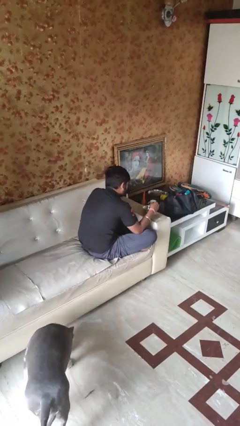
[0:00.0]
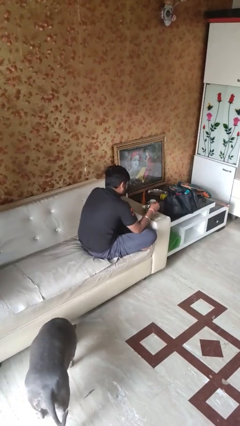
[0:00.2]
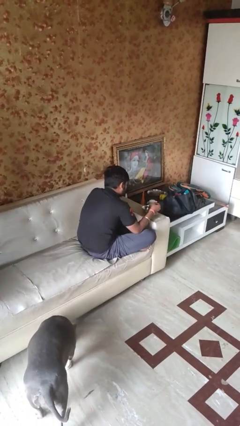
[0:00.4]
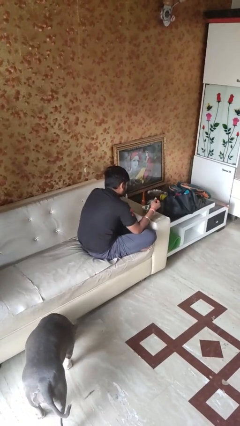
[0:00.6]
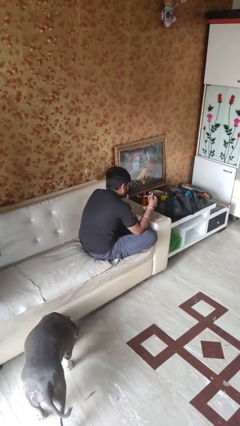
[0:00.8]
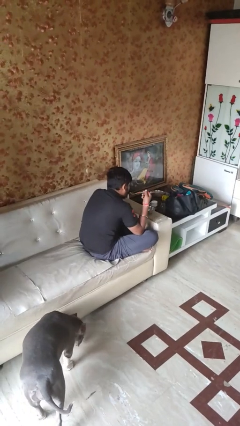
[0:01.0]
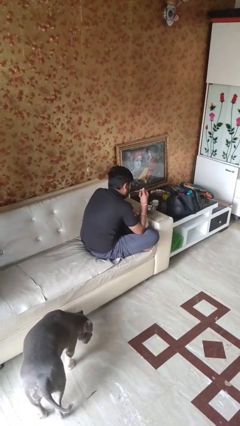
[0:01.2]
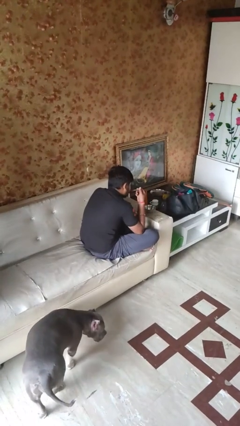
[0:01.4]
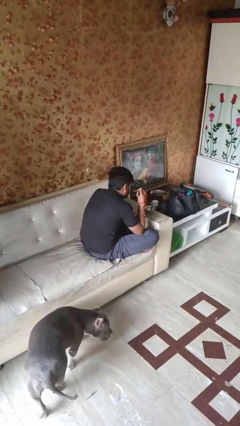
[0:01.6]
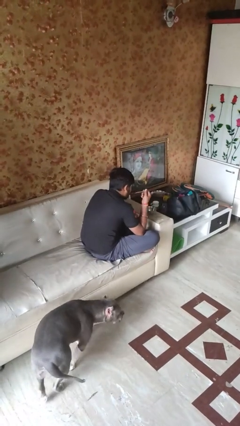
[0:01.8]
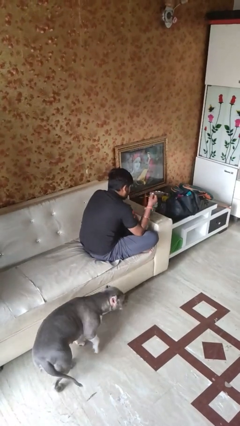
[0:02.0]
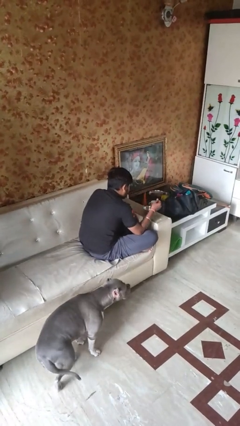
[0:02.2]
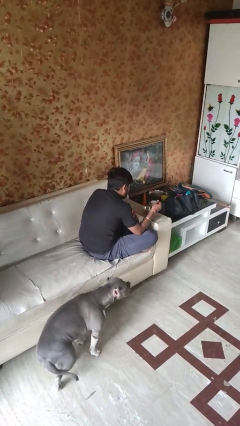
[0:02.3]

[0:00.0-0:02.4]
person eats with utensil

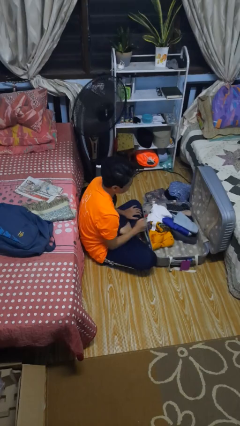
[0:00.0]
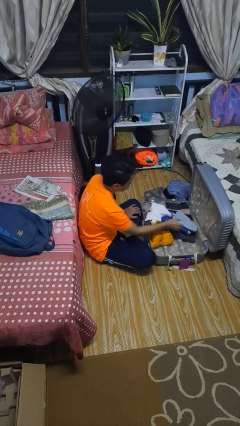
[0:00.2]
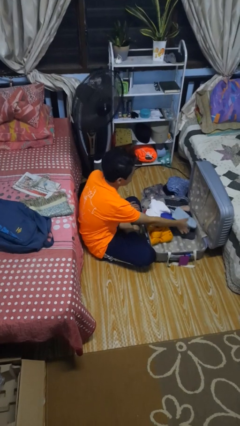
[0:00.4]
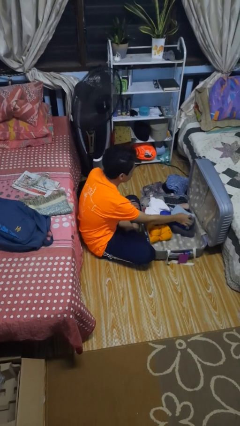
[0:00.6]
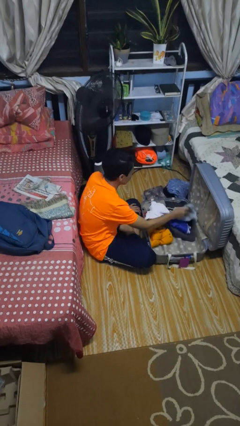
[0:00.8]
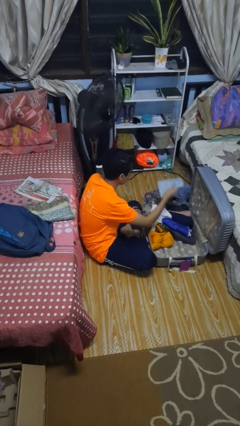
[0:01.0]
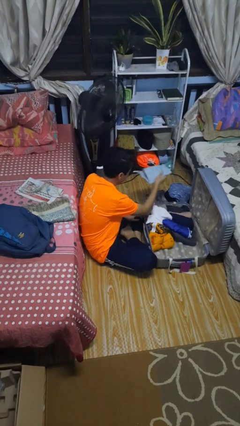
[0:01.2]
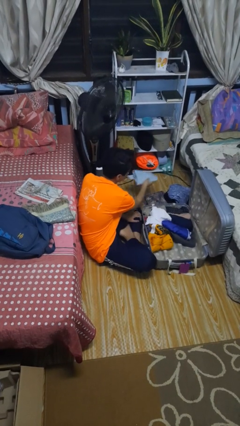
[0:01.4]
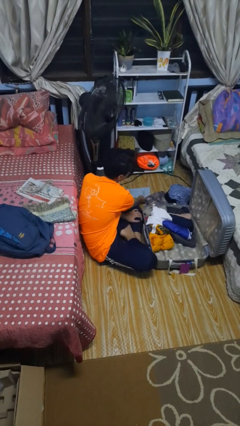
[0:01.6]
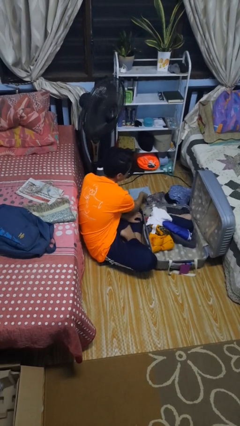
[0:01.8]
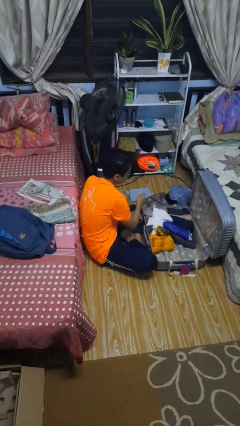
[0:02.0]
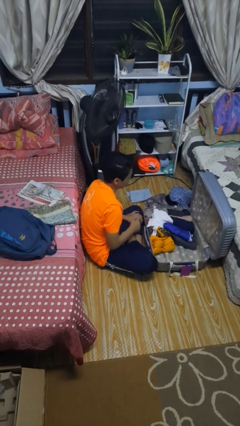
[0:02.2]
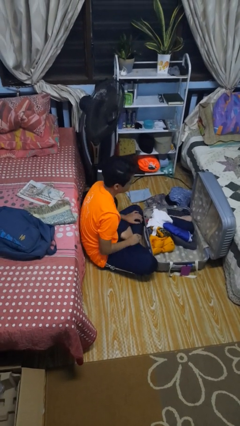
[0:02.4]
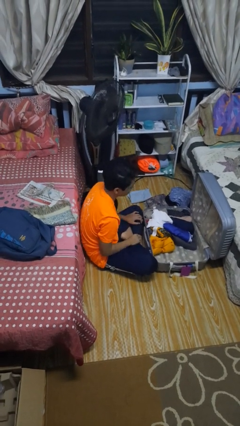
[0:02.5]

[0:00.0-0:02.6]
person unloads clothes from suitcase

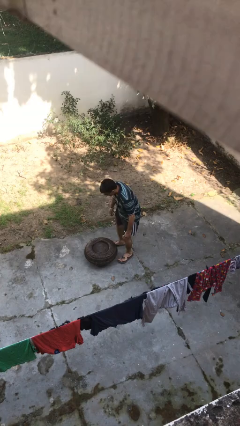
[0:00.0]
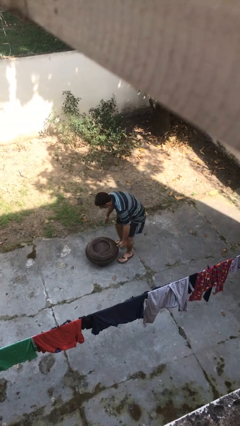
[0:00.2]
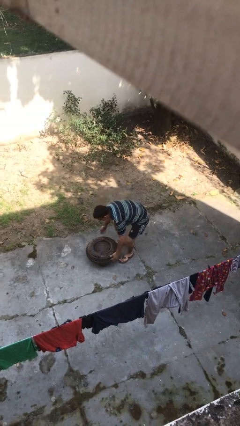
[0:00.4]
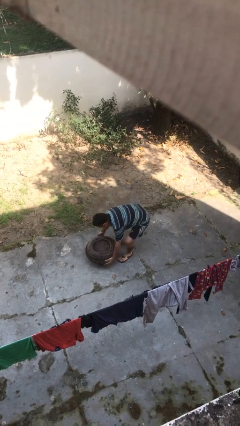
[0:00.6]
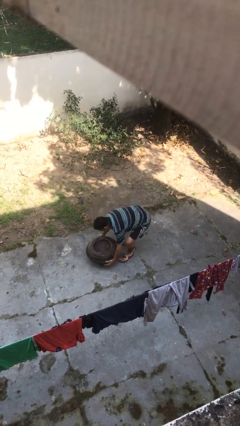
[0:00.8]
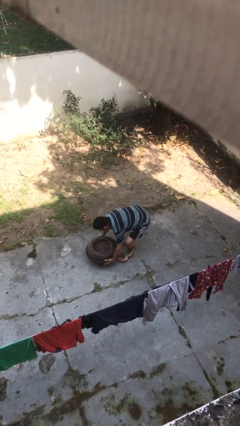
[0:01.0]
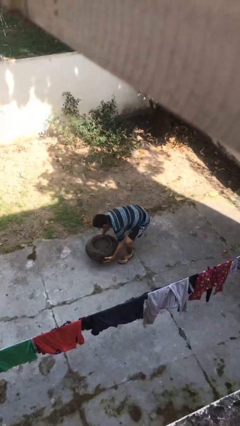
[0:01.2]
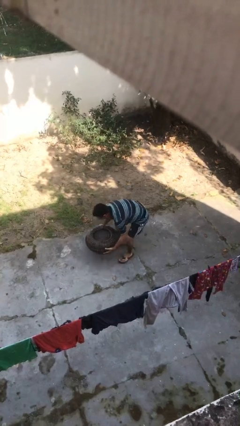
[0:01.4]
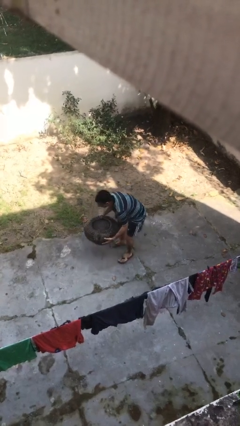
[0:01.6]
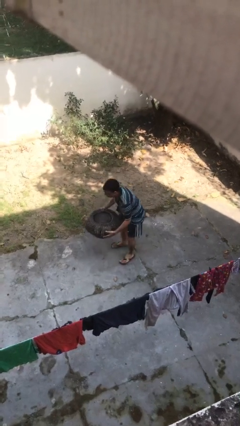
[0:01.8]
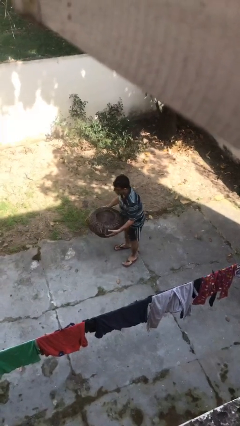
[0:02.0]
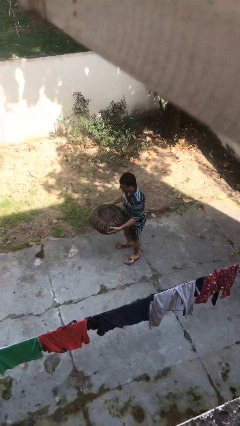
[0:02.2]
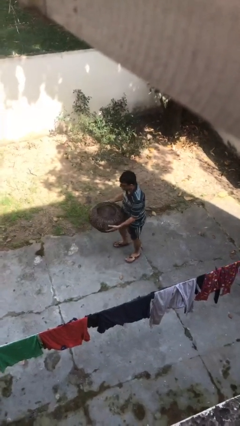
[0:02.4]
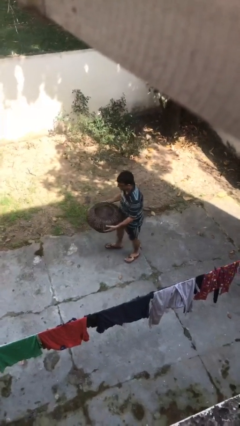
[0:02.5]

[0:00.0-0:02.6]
person picks up object from floor

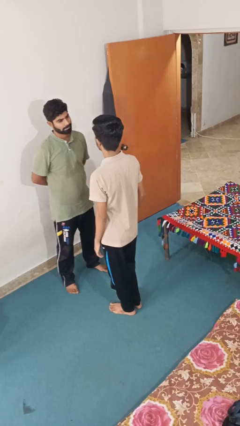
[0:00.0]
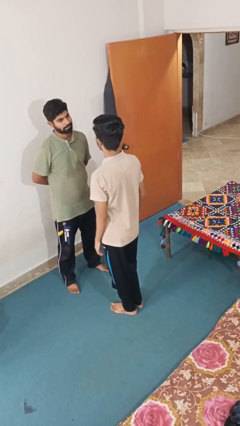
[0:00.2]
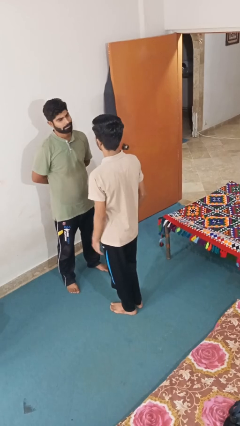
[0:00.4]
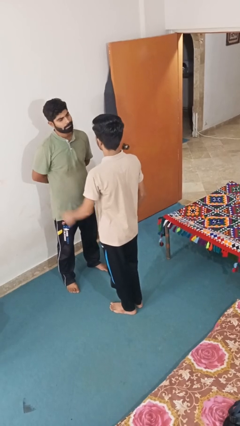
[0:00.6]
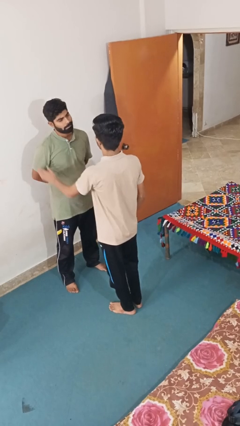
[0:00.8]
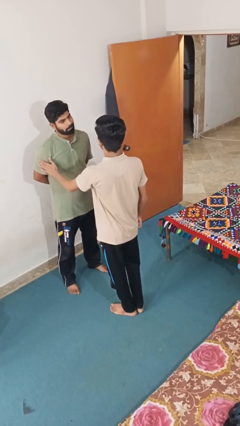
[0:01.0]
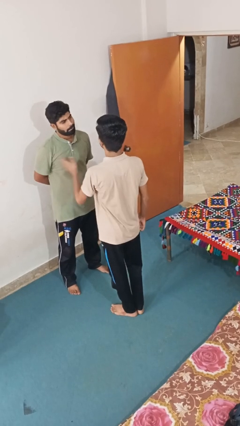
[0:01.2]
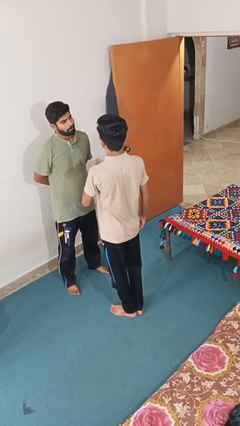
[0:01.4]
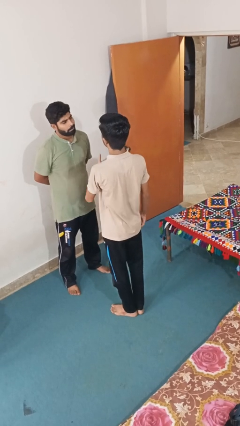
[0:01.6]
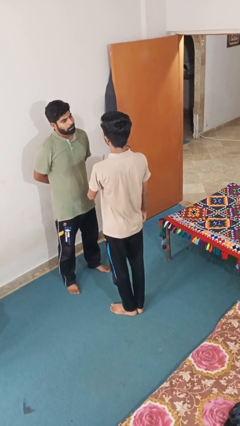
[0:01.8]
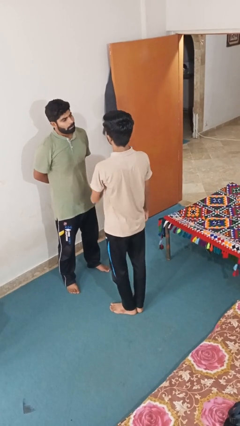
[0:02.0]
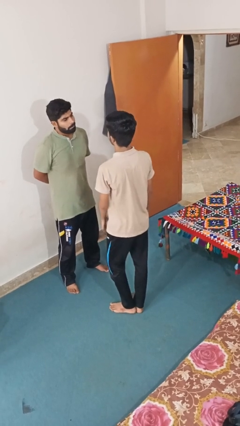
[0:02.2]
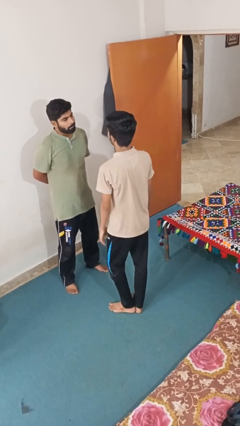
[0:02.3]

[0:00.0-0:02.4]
person shoves person

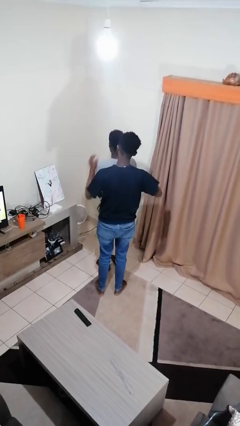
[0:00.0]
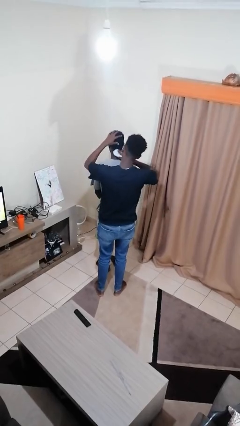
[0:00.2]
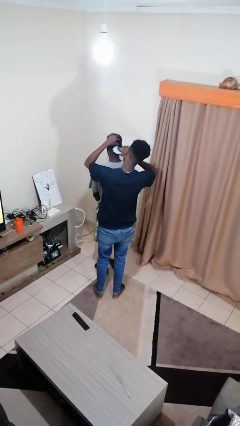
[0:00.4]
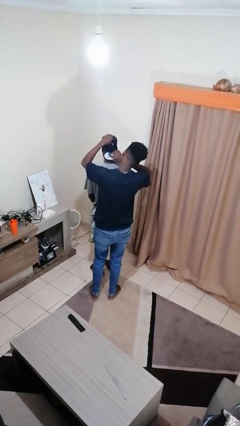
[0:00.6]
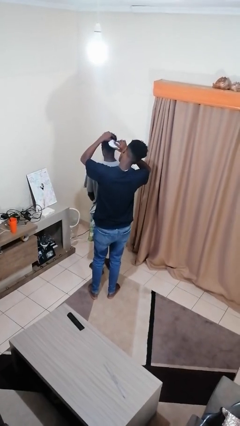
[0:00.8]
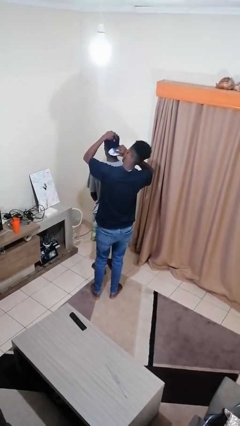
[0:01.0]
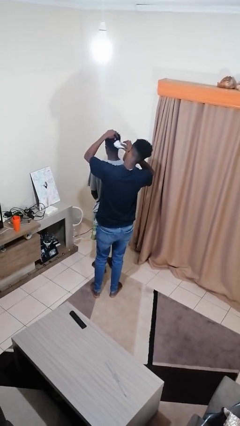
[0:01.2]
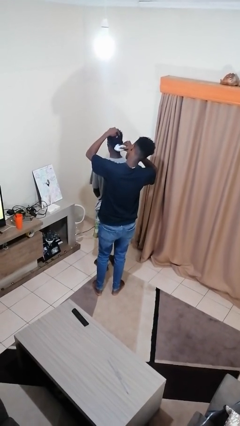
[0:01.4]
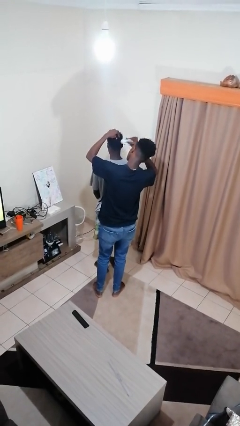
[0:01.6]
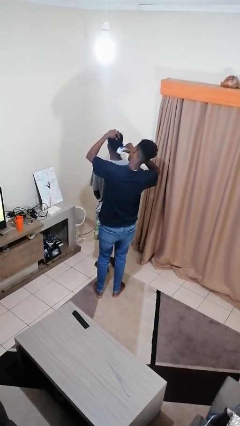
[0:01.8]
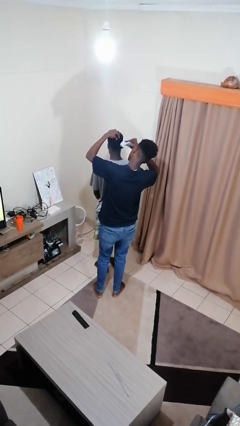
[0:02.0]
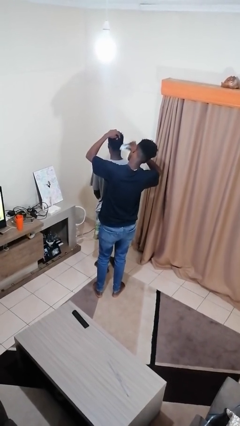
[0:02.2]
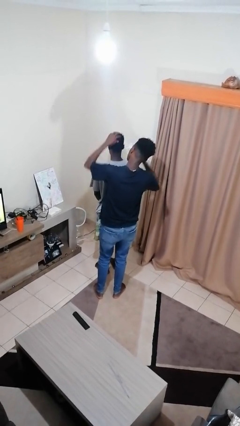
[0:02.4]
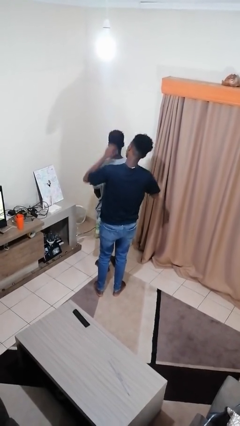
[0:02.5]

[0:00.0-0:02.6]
person brushes hair of person

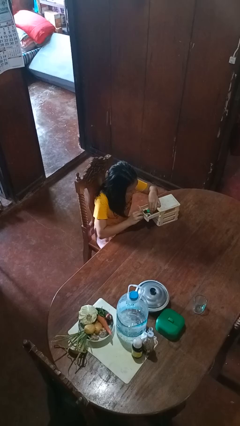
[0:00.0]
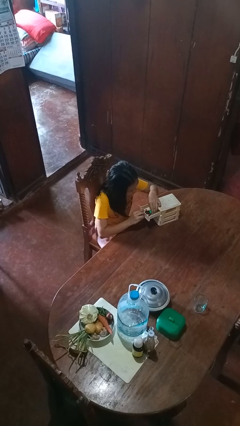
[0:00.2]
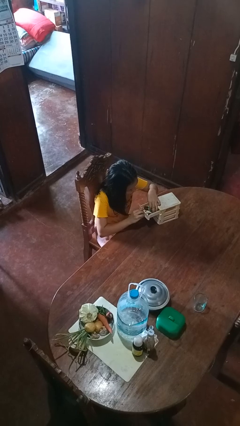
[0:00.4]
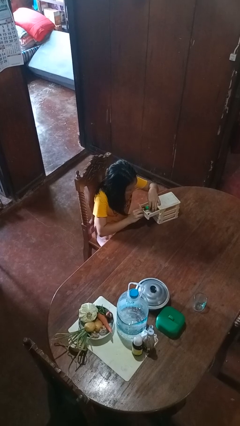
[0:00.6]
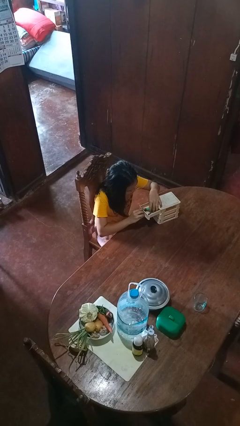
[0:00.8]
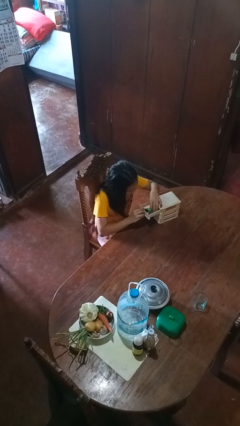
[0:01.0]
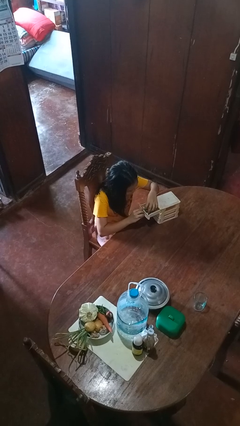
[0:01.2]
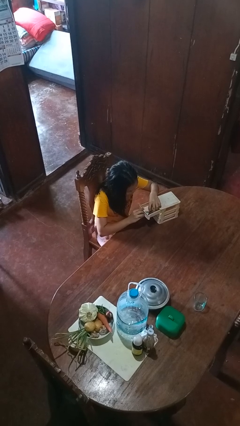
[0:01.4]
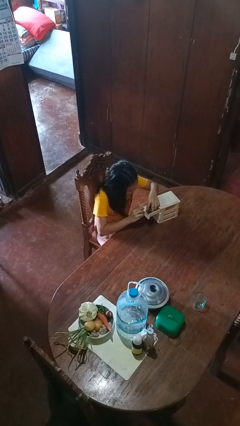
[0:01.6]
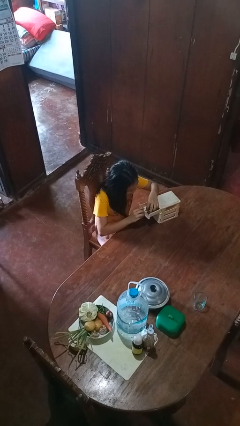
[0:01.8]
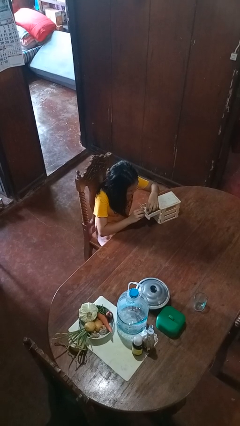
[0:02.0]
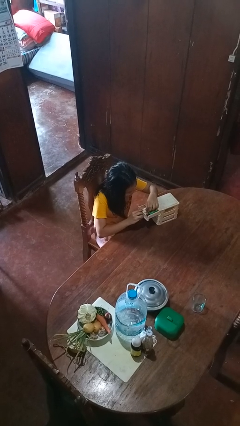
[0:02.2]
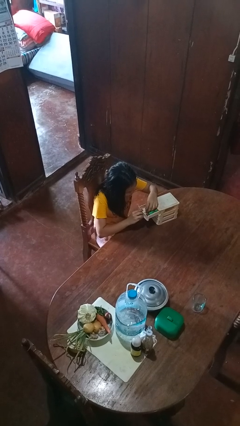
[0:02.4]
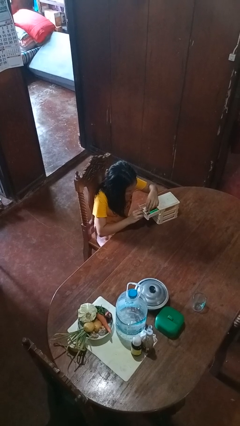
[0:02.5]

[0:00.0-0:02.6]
person searches jewelry box

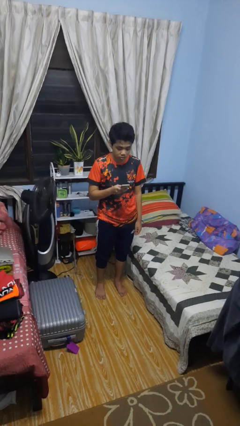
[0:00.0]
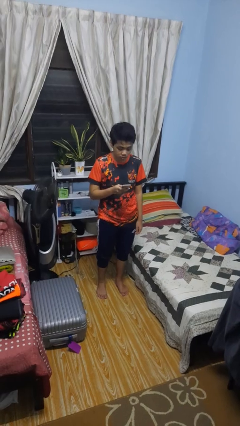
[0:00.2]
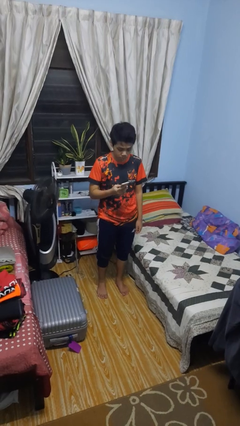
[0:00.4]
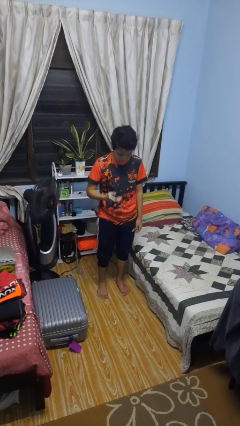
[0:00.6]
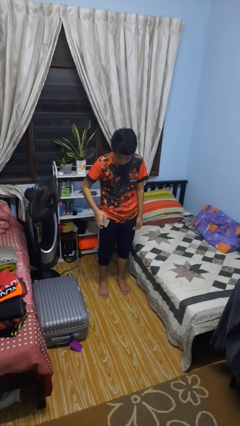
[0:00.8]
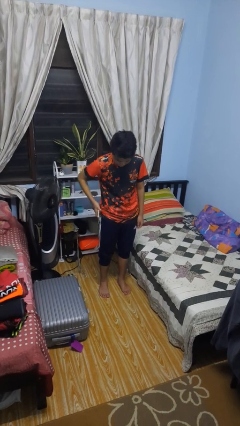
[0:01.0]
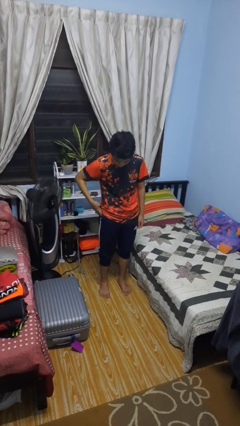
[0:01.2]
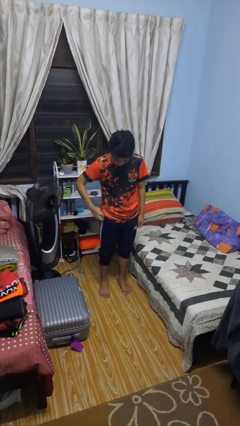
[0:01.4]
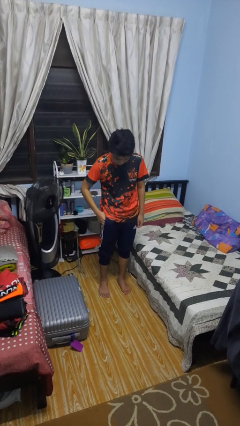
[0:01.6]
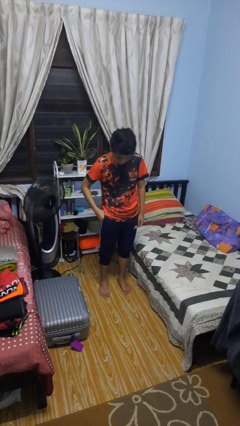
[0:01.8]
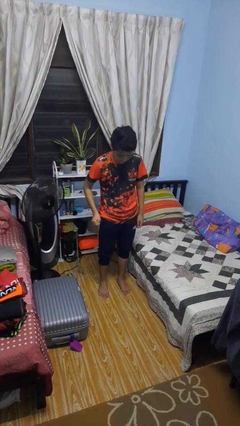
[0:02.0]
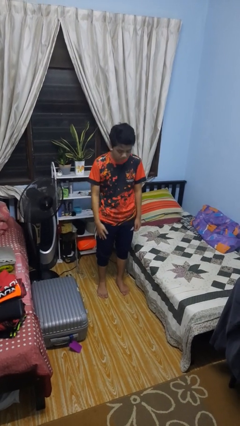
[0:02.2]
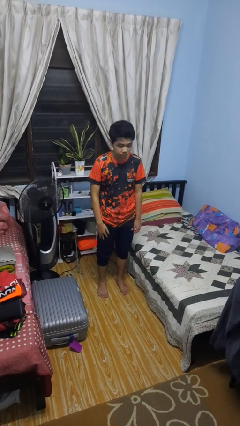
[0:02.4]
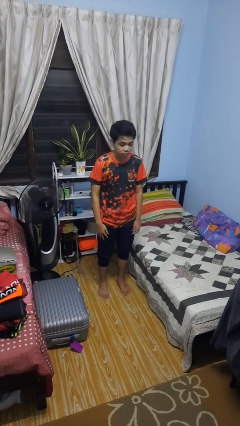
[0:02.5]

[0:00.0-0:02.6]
person puts phone into pocket
